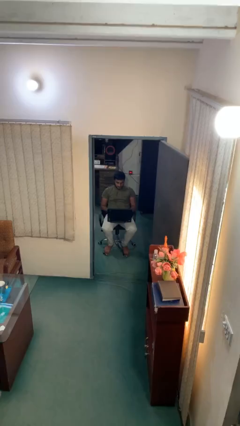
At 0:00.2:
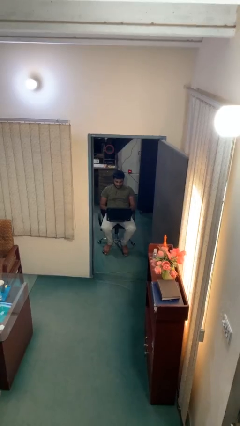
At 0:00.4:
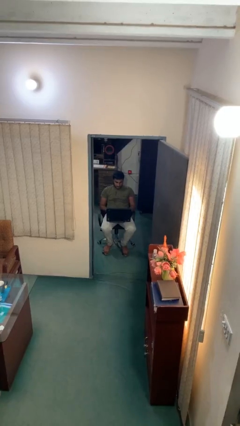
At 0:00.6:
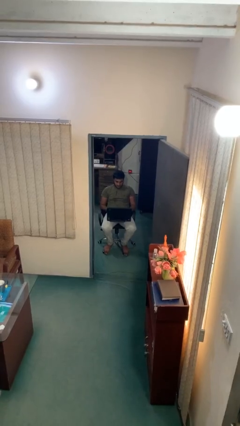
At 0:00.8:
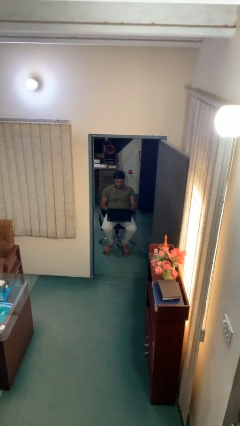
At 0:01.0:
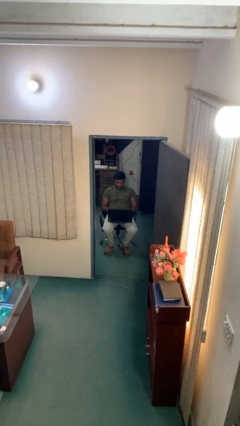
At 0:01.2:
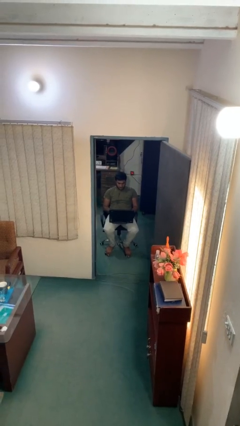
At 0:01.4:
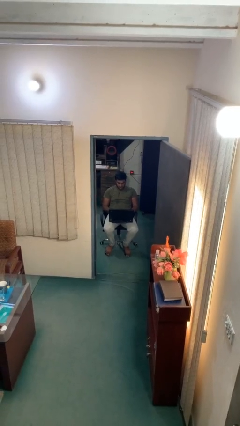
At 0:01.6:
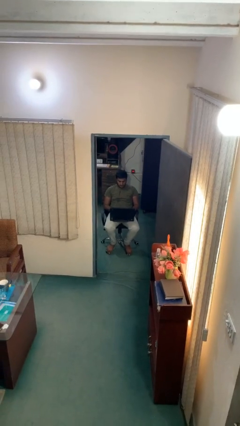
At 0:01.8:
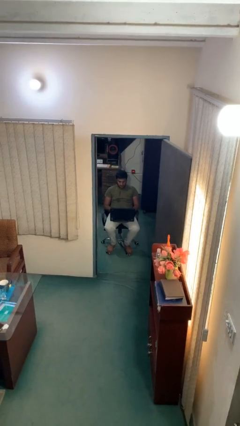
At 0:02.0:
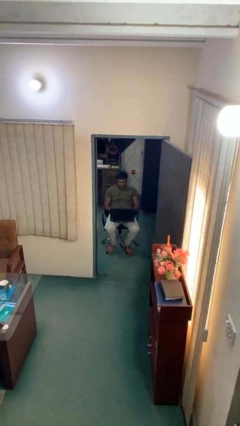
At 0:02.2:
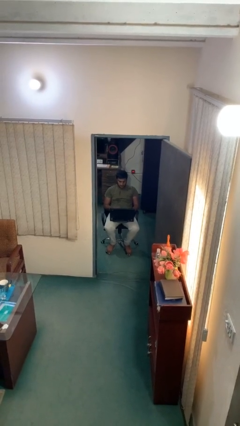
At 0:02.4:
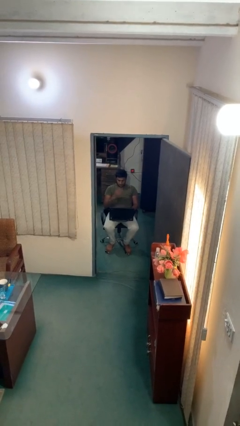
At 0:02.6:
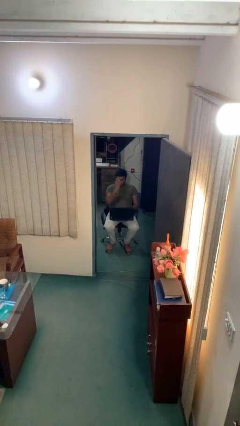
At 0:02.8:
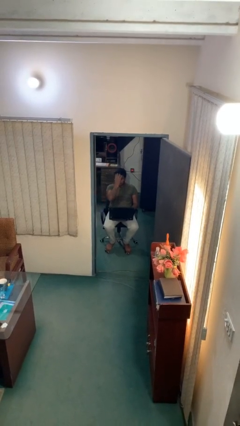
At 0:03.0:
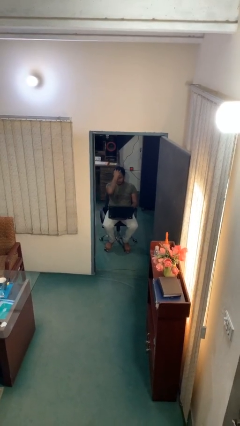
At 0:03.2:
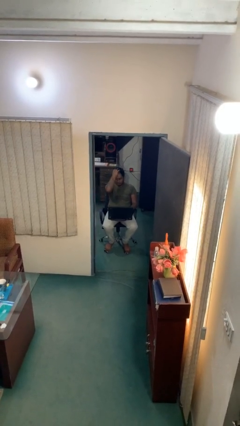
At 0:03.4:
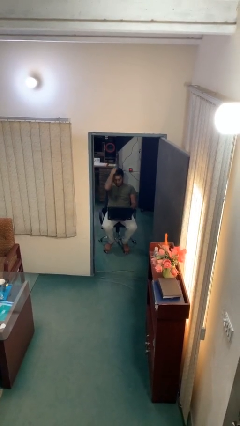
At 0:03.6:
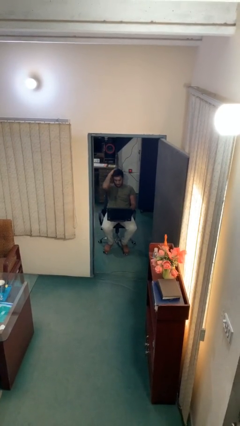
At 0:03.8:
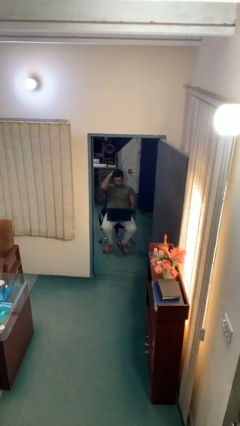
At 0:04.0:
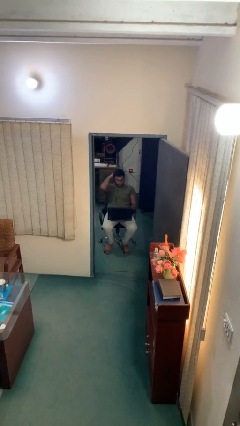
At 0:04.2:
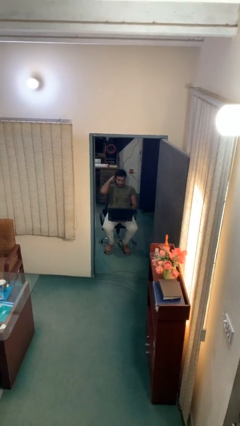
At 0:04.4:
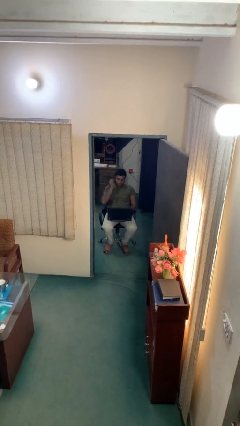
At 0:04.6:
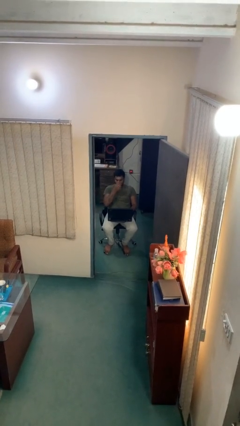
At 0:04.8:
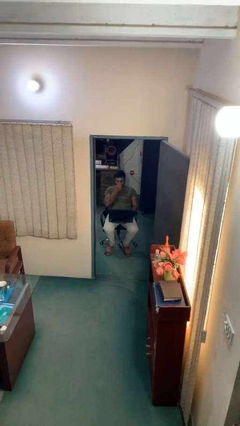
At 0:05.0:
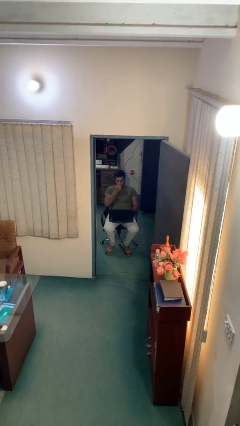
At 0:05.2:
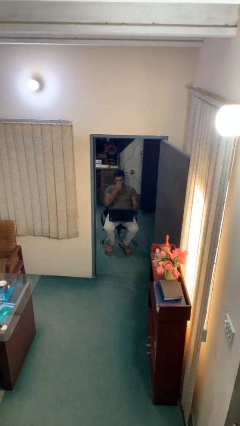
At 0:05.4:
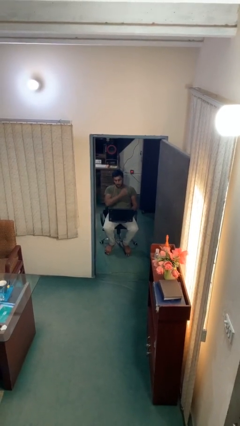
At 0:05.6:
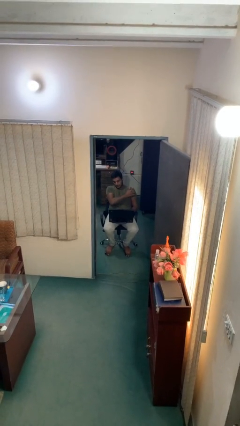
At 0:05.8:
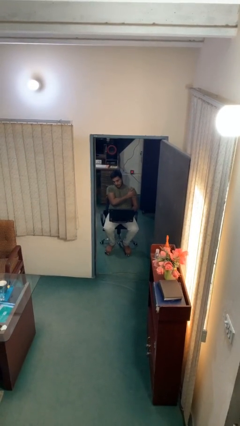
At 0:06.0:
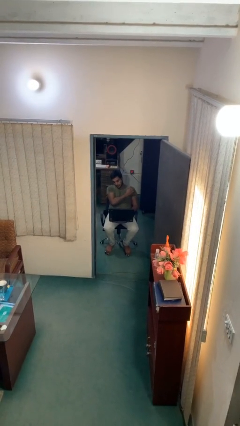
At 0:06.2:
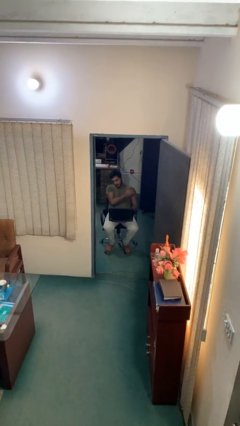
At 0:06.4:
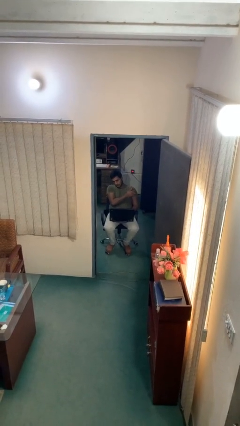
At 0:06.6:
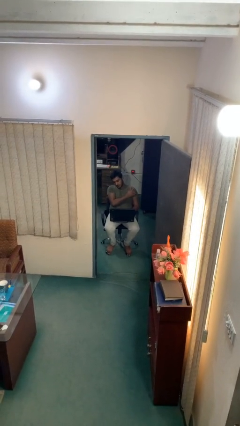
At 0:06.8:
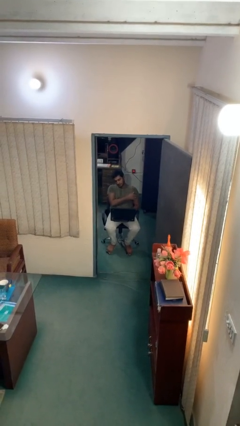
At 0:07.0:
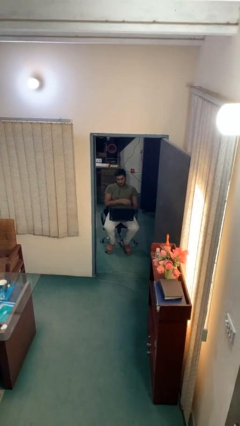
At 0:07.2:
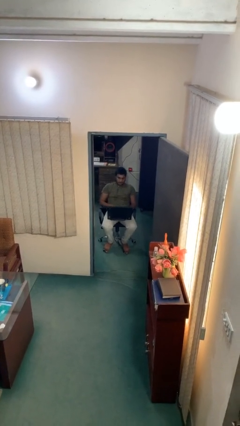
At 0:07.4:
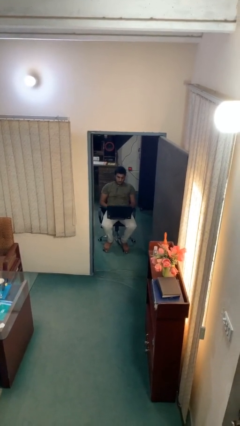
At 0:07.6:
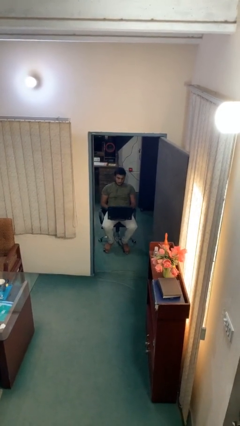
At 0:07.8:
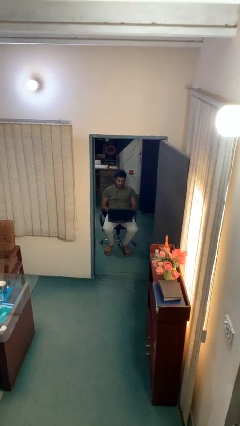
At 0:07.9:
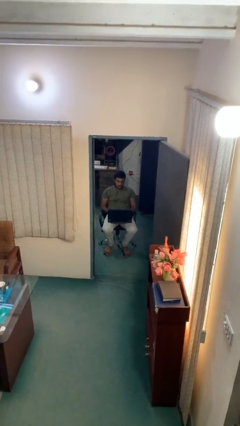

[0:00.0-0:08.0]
person interacts with laptop

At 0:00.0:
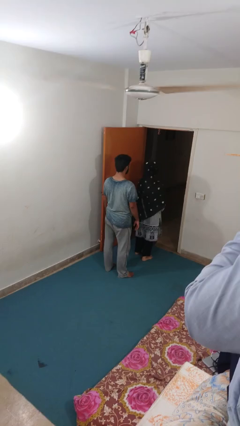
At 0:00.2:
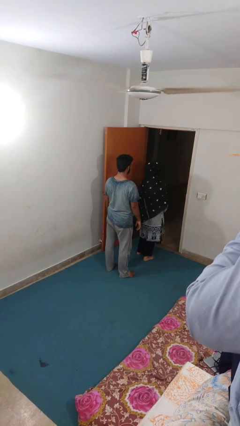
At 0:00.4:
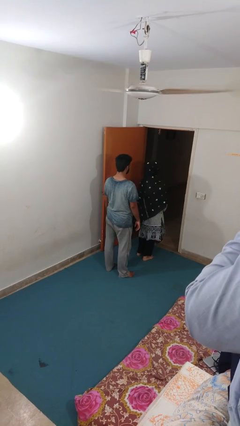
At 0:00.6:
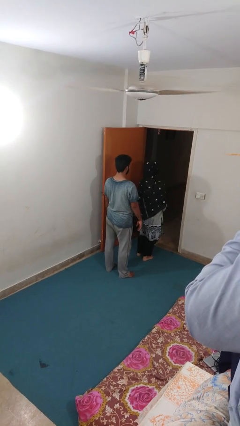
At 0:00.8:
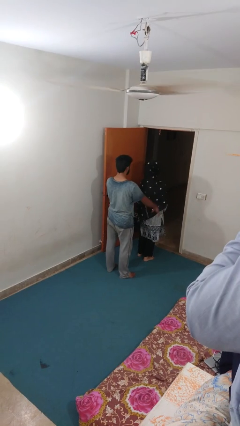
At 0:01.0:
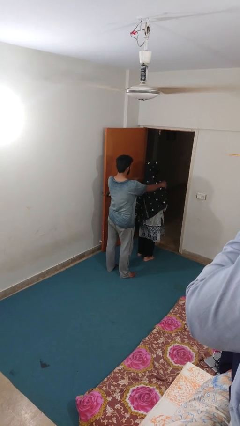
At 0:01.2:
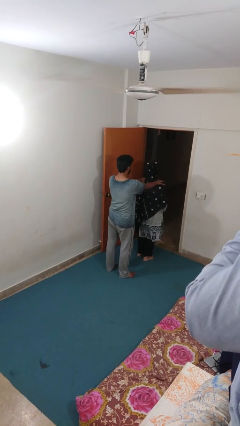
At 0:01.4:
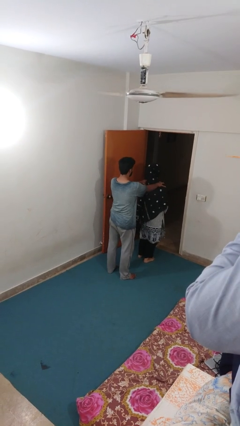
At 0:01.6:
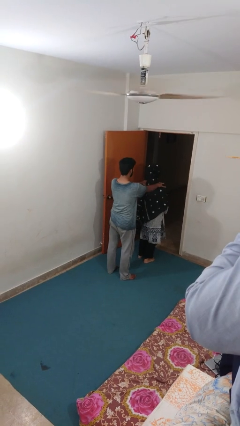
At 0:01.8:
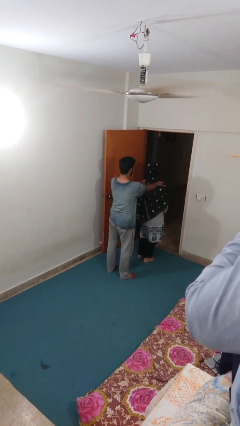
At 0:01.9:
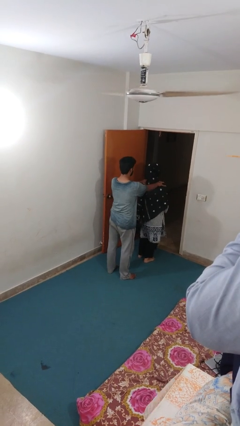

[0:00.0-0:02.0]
person grabs person by shoulder

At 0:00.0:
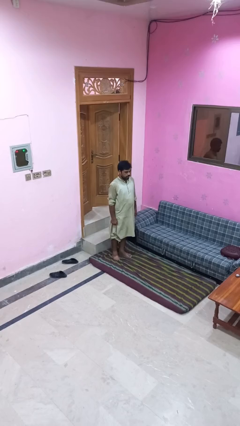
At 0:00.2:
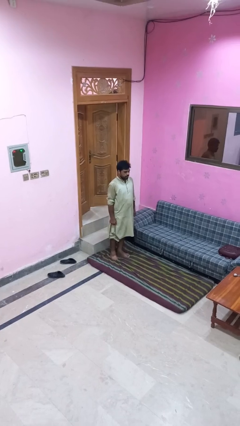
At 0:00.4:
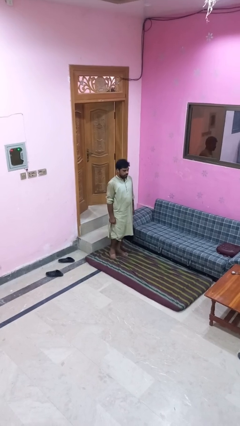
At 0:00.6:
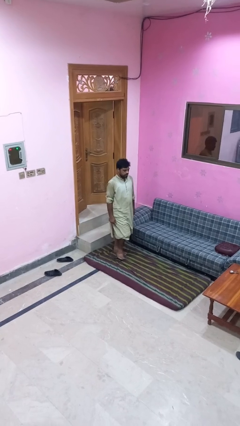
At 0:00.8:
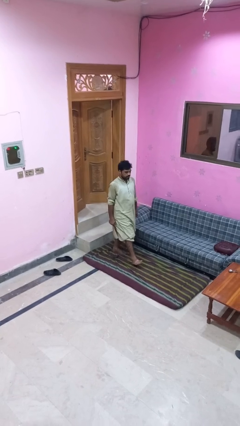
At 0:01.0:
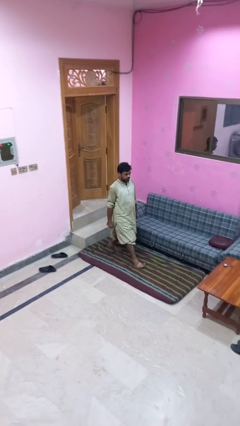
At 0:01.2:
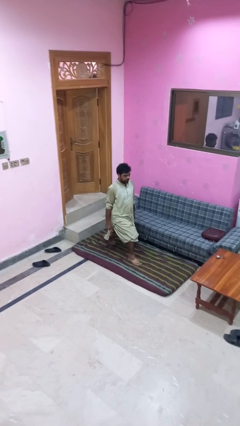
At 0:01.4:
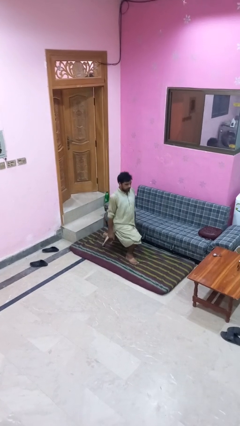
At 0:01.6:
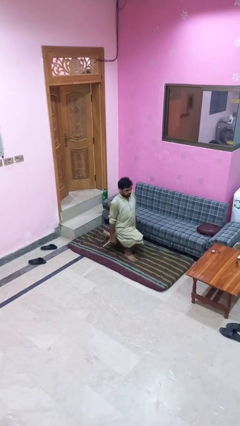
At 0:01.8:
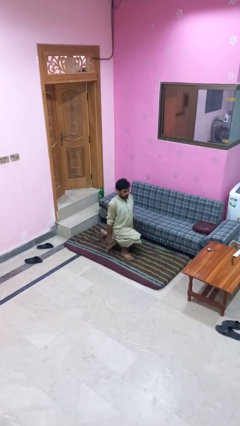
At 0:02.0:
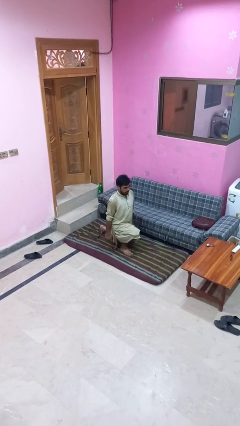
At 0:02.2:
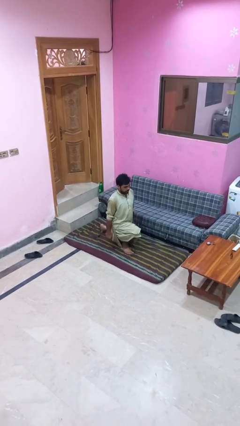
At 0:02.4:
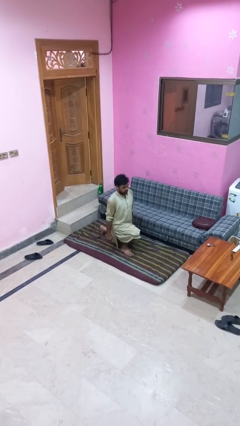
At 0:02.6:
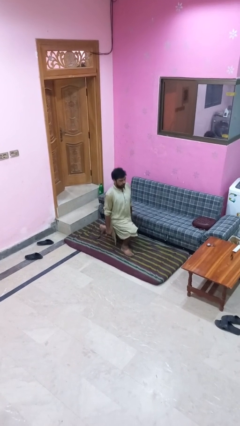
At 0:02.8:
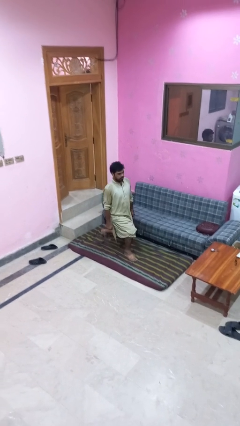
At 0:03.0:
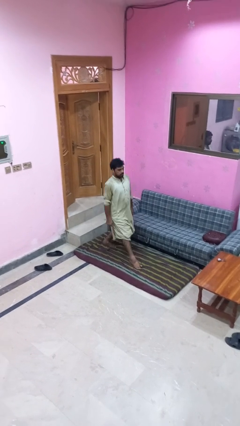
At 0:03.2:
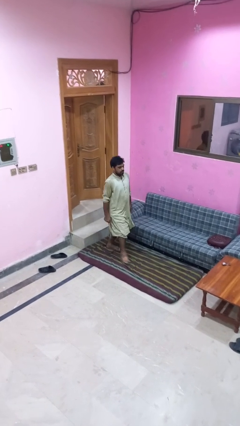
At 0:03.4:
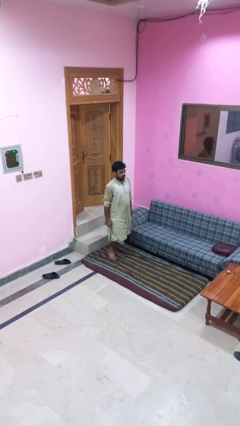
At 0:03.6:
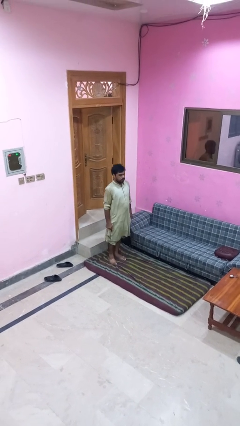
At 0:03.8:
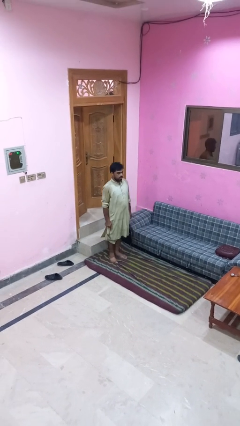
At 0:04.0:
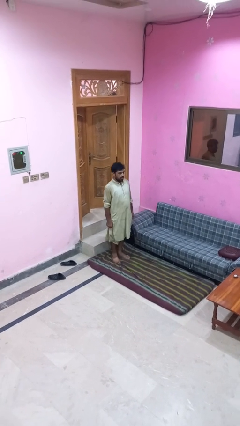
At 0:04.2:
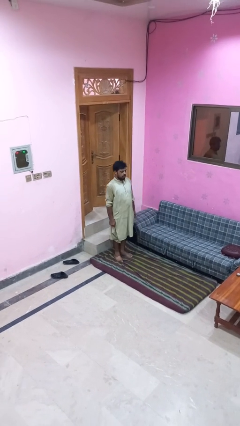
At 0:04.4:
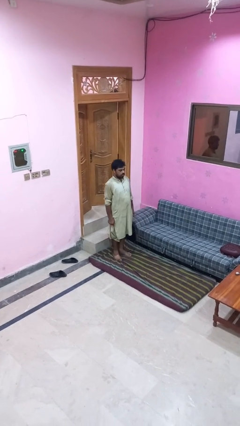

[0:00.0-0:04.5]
person exercises with lunges

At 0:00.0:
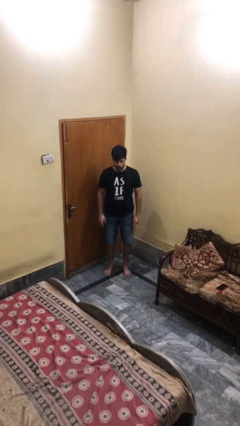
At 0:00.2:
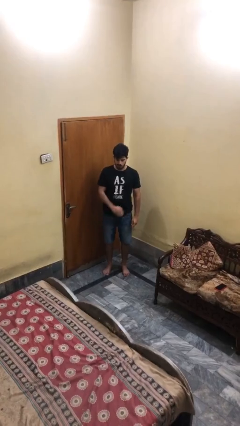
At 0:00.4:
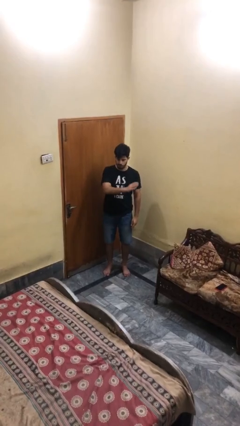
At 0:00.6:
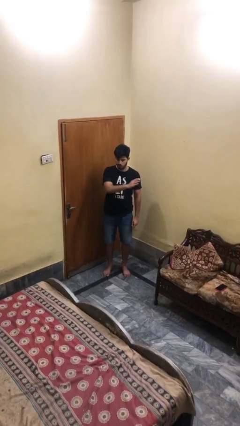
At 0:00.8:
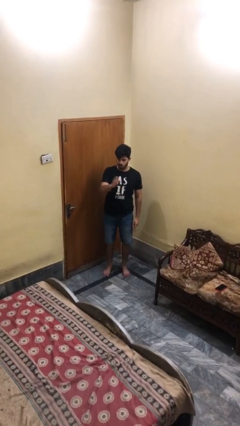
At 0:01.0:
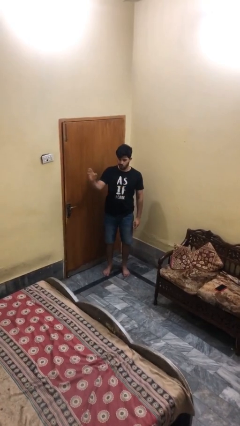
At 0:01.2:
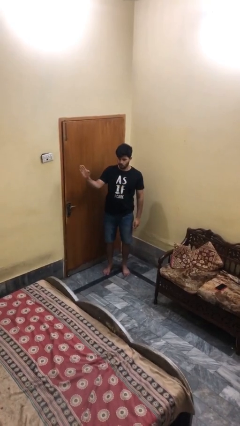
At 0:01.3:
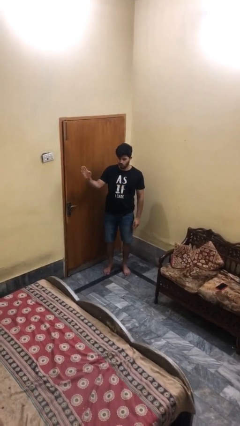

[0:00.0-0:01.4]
person gestures swipe right

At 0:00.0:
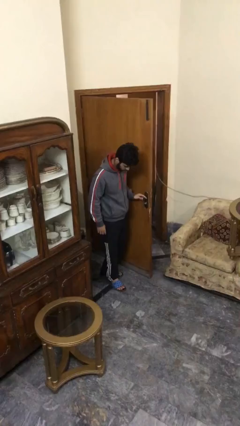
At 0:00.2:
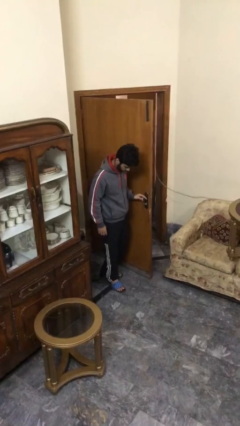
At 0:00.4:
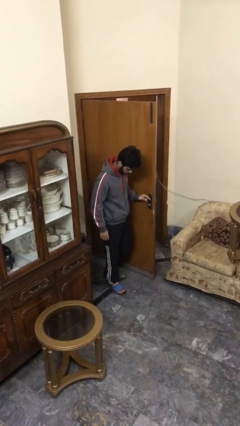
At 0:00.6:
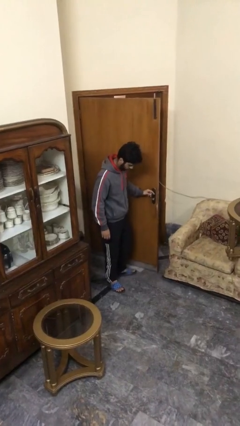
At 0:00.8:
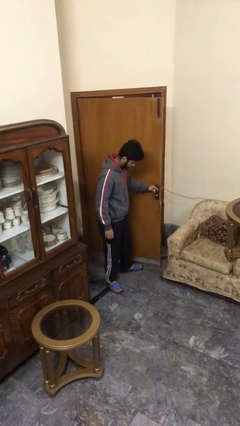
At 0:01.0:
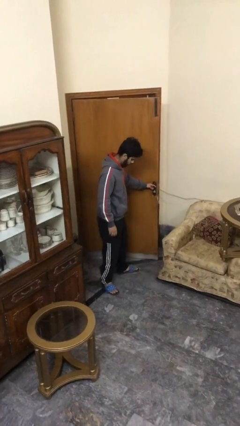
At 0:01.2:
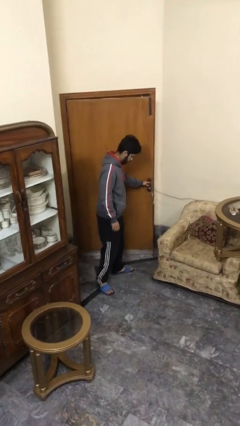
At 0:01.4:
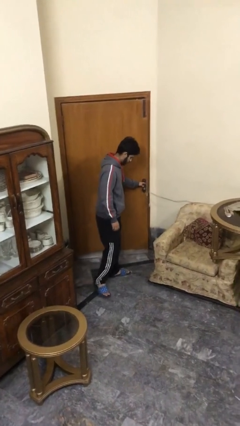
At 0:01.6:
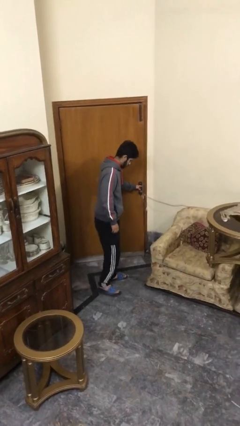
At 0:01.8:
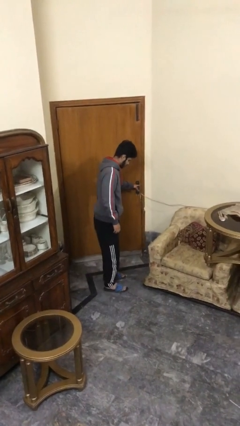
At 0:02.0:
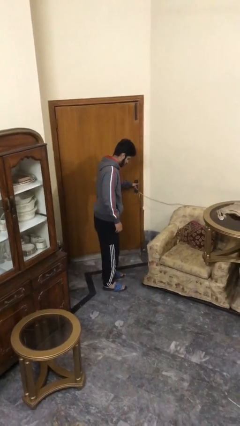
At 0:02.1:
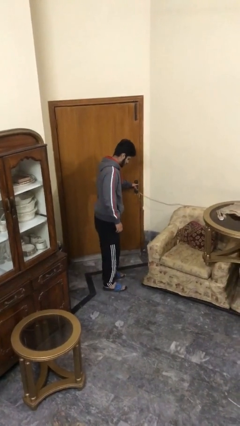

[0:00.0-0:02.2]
person closes facility door
